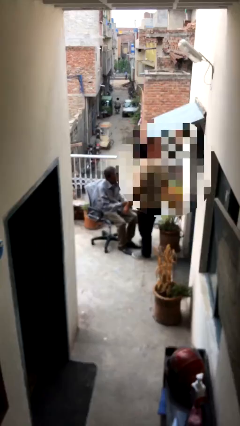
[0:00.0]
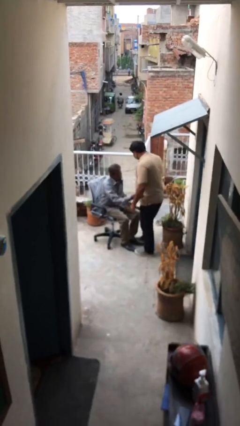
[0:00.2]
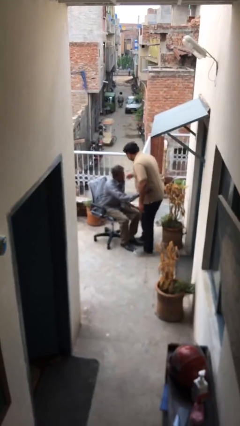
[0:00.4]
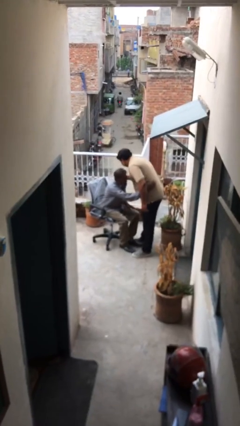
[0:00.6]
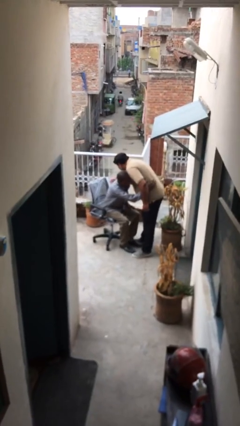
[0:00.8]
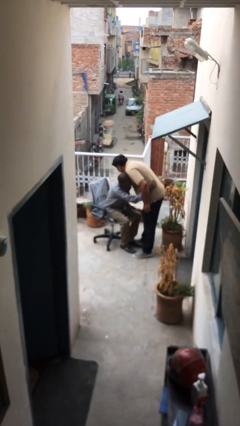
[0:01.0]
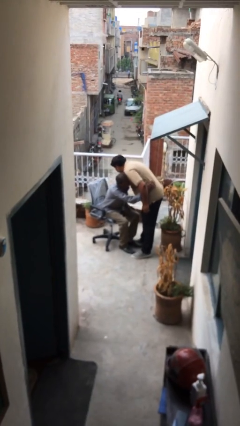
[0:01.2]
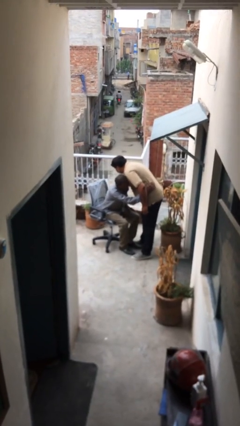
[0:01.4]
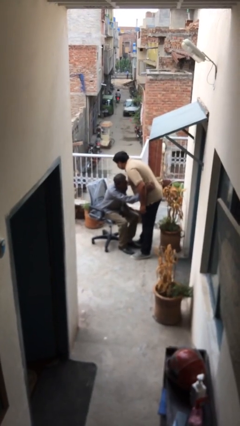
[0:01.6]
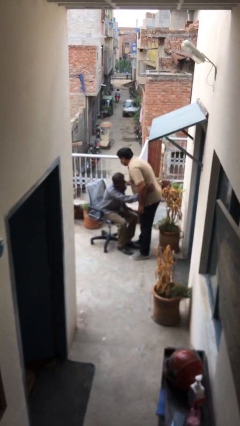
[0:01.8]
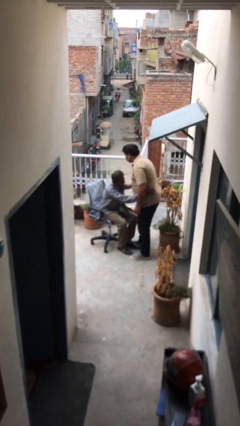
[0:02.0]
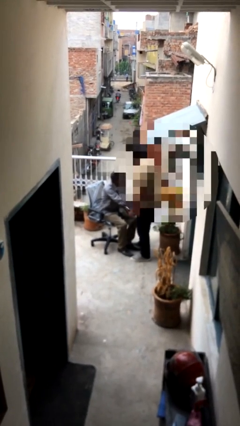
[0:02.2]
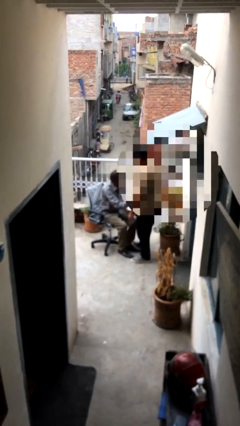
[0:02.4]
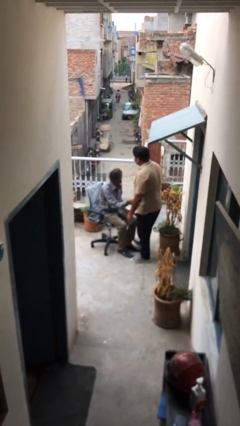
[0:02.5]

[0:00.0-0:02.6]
person embraces person

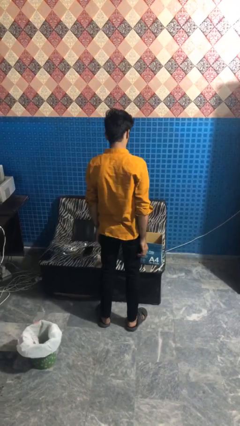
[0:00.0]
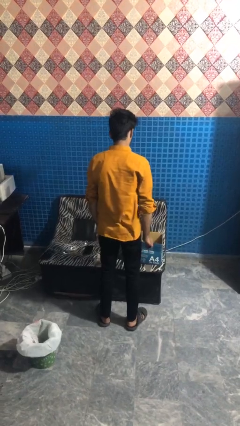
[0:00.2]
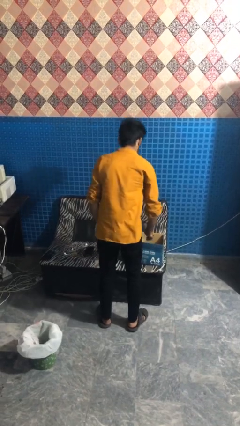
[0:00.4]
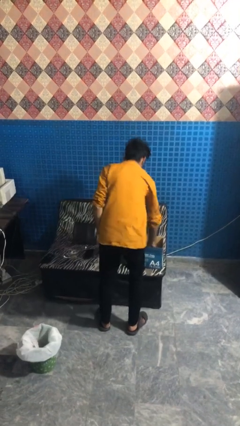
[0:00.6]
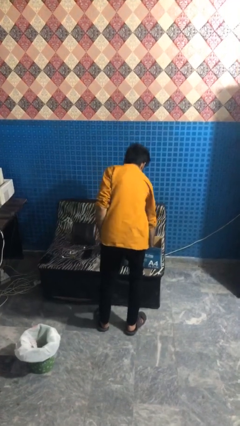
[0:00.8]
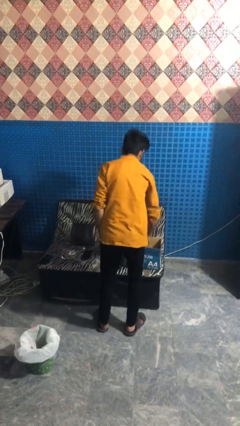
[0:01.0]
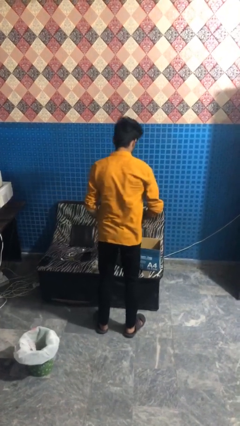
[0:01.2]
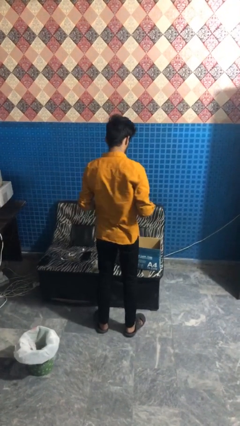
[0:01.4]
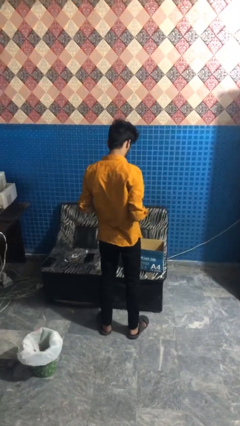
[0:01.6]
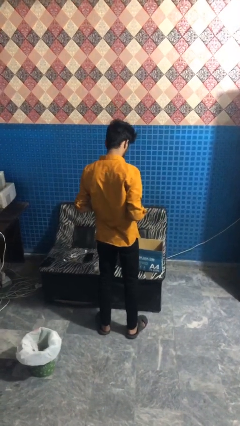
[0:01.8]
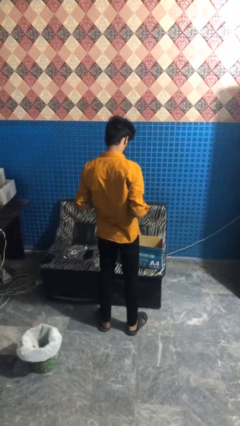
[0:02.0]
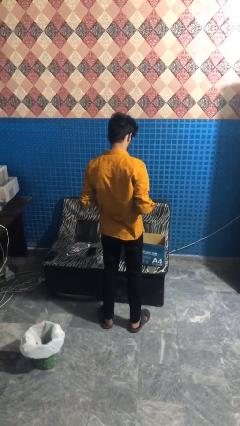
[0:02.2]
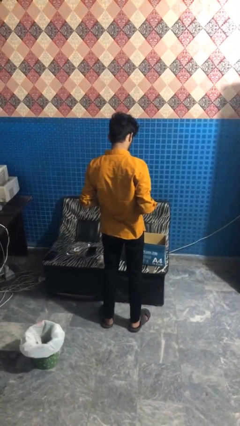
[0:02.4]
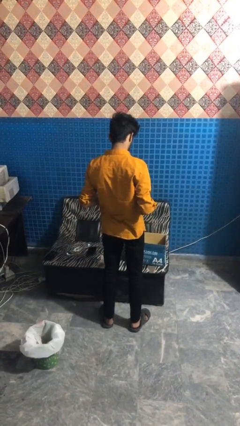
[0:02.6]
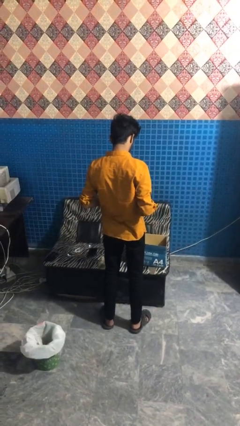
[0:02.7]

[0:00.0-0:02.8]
person takes object from box

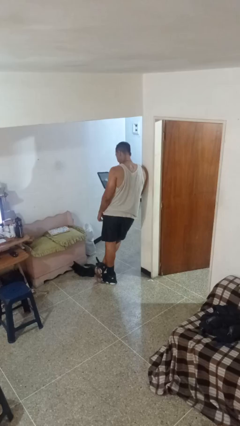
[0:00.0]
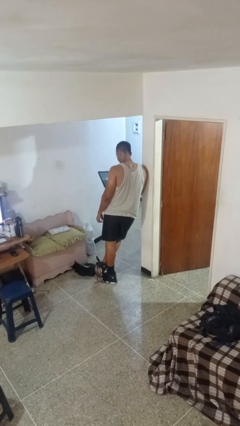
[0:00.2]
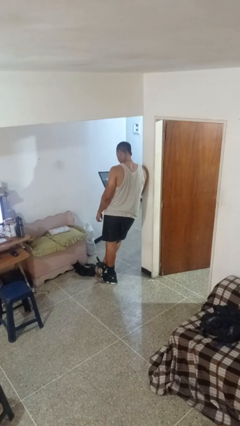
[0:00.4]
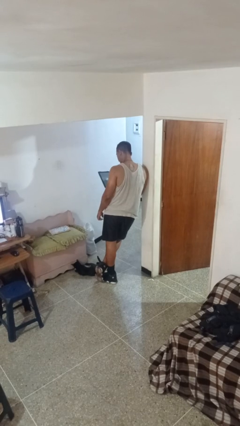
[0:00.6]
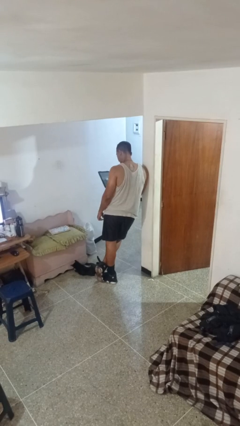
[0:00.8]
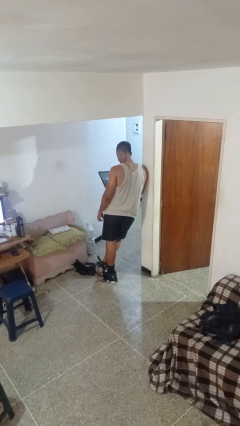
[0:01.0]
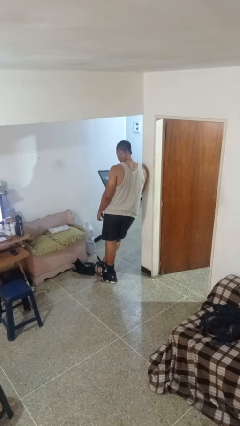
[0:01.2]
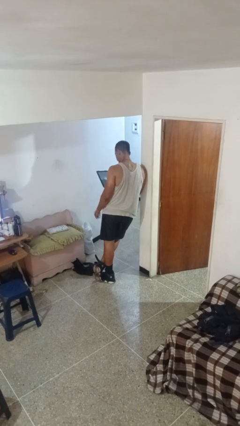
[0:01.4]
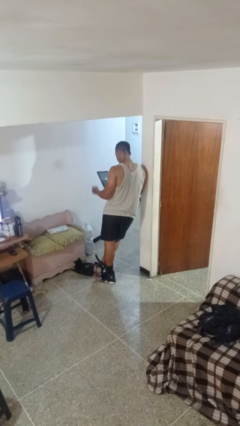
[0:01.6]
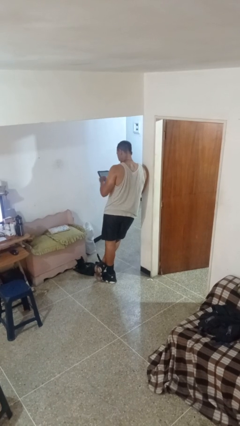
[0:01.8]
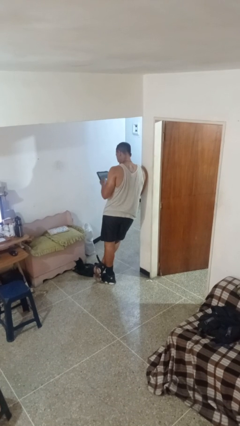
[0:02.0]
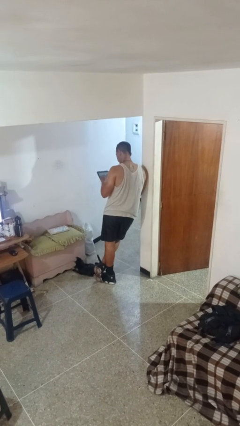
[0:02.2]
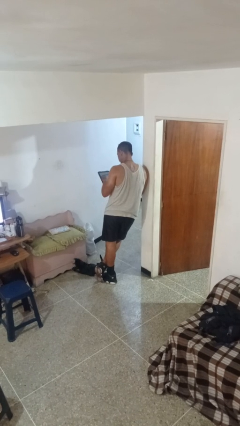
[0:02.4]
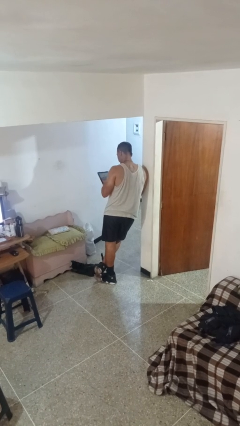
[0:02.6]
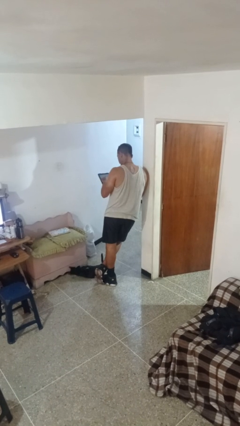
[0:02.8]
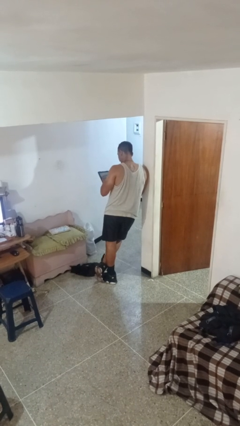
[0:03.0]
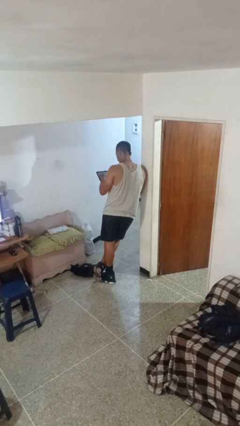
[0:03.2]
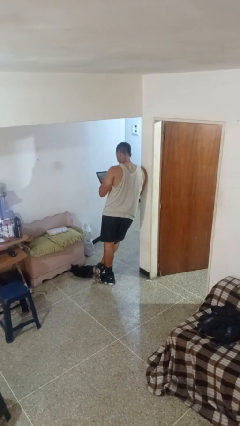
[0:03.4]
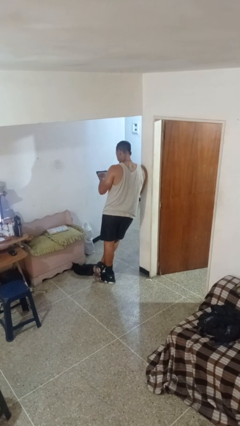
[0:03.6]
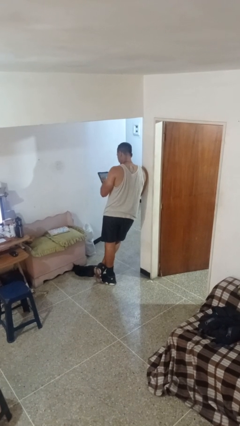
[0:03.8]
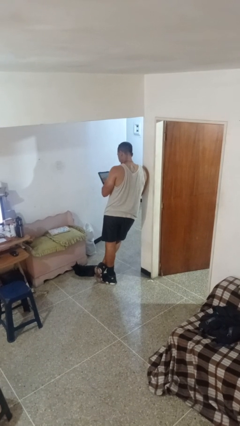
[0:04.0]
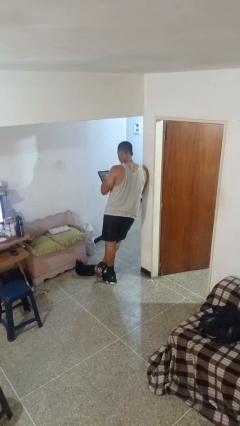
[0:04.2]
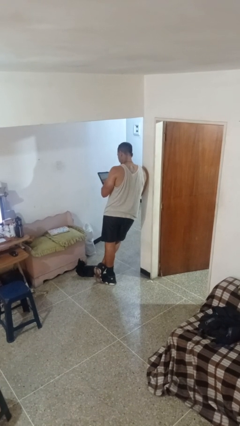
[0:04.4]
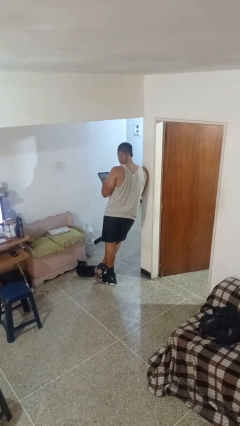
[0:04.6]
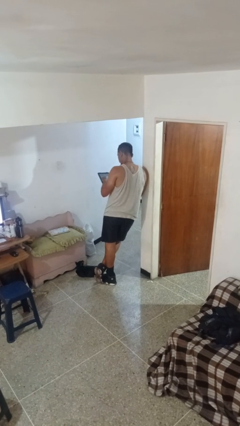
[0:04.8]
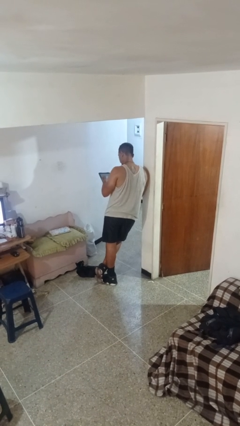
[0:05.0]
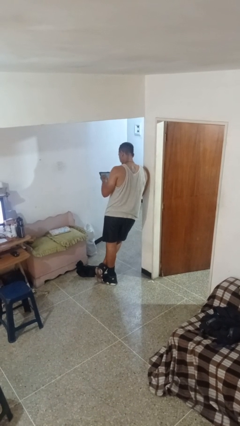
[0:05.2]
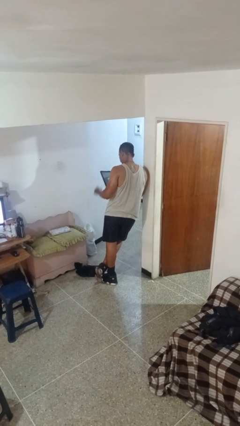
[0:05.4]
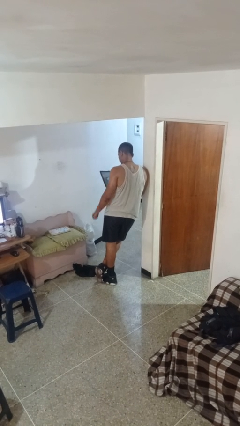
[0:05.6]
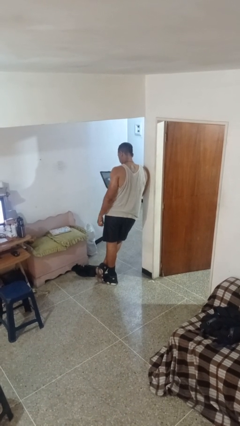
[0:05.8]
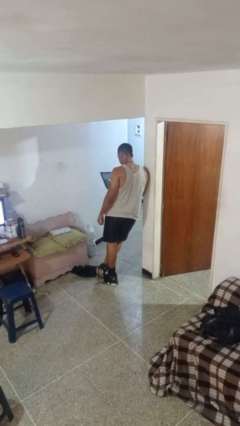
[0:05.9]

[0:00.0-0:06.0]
person interacts with tablet

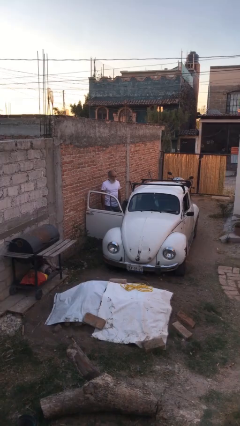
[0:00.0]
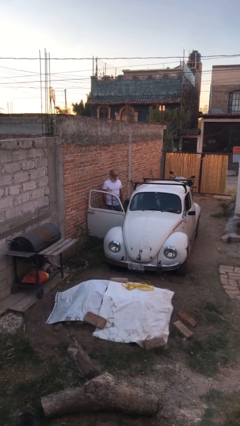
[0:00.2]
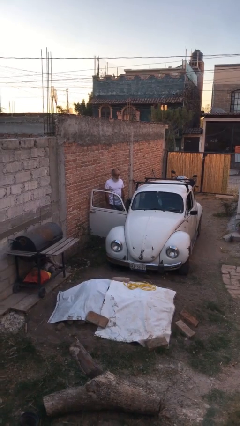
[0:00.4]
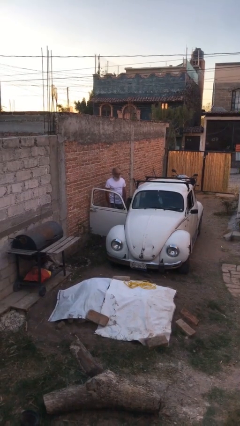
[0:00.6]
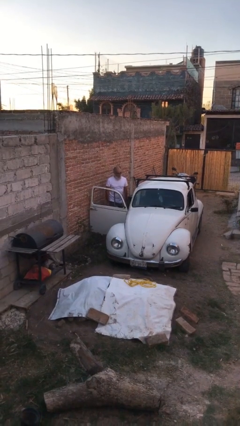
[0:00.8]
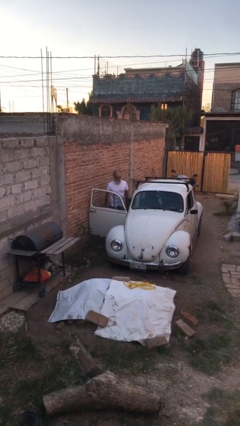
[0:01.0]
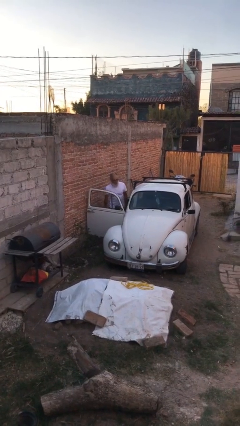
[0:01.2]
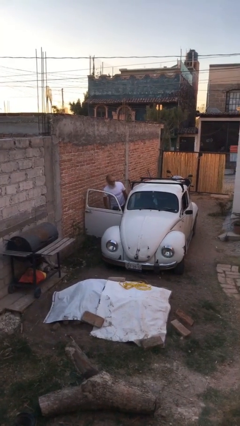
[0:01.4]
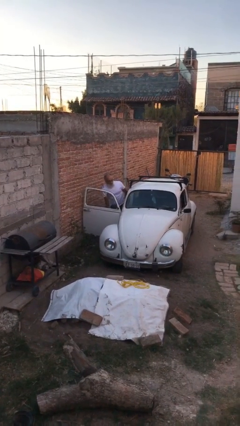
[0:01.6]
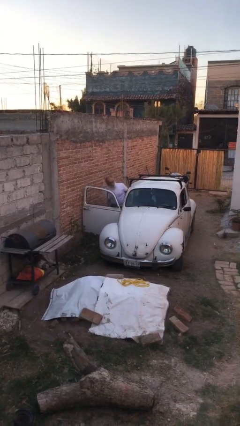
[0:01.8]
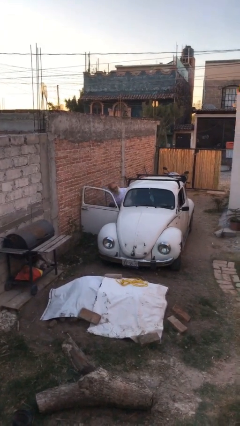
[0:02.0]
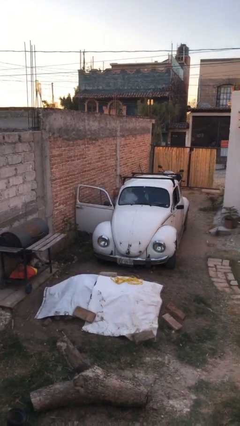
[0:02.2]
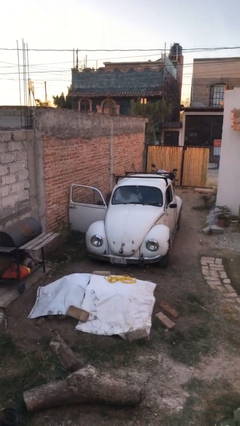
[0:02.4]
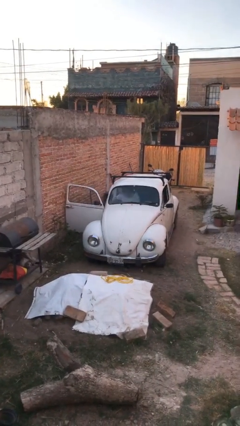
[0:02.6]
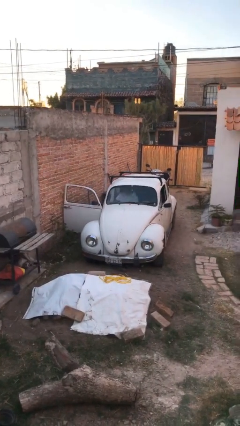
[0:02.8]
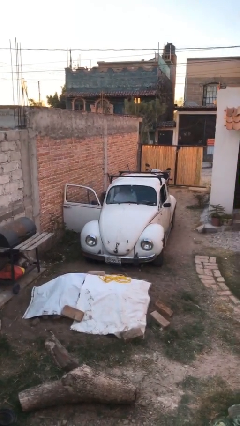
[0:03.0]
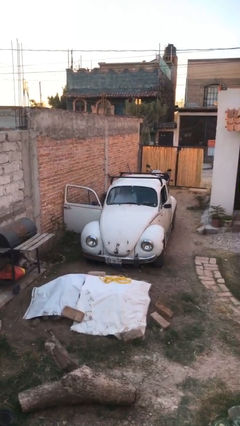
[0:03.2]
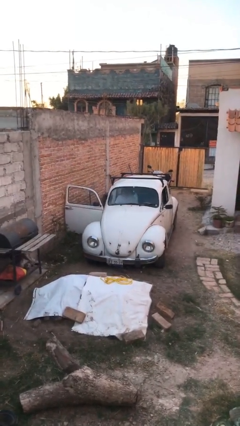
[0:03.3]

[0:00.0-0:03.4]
person enters car

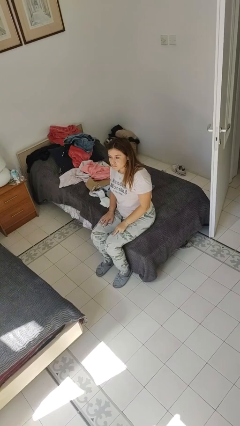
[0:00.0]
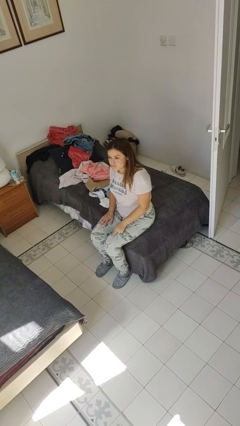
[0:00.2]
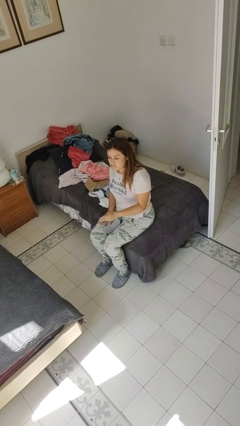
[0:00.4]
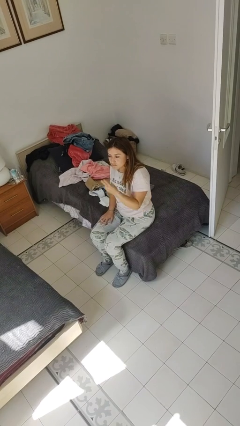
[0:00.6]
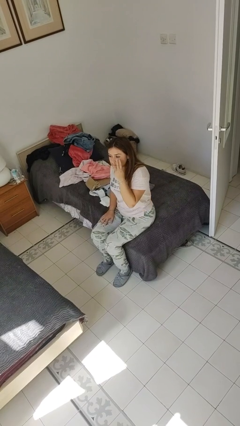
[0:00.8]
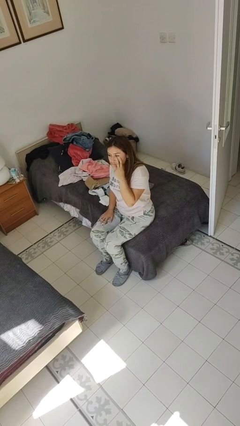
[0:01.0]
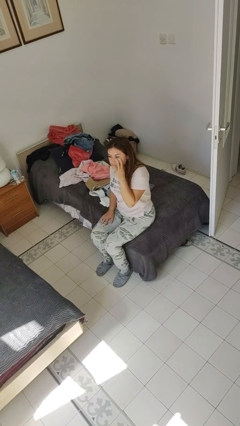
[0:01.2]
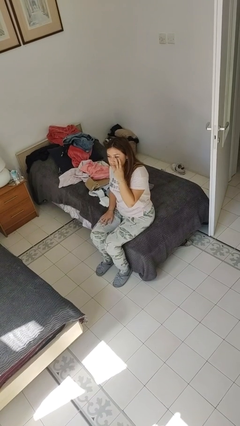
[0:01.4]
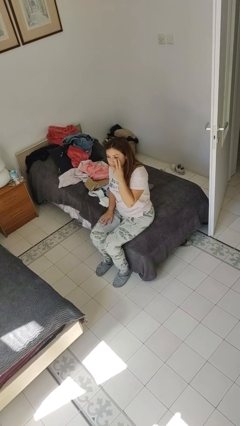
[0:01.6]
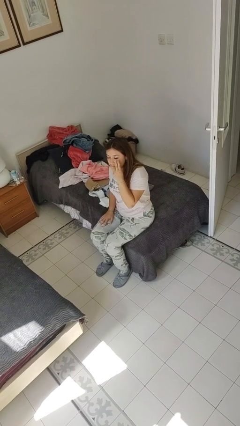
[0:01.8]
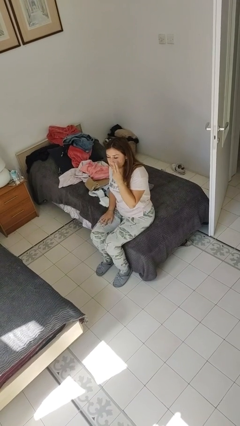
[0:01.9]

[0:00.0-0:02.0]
person gestures watch closely

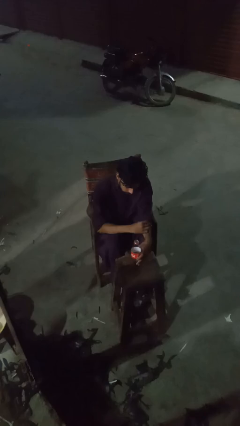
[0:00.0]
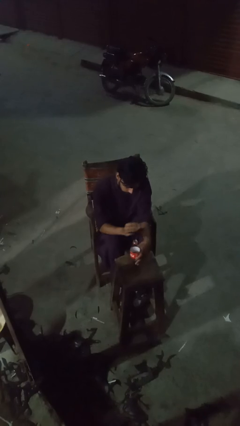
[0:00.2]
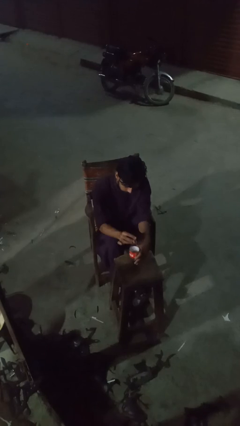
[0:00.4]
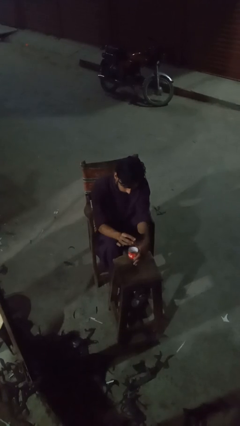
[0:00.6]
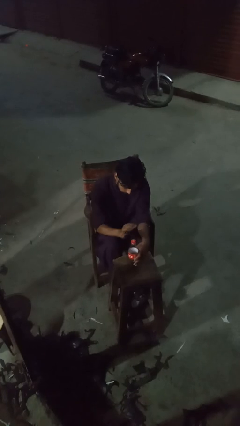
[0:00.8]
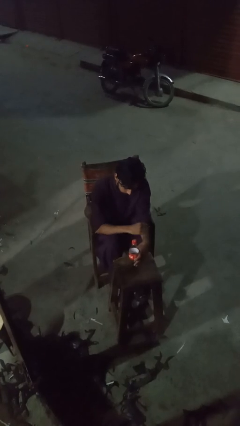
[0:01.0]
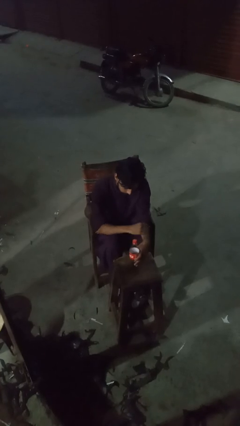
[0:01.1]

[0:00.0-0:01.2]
person screws lid to bottle
